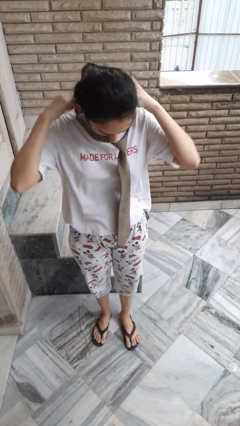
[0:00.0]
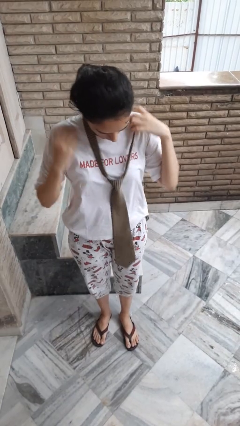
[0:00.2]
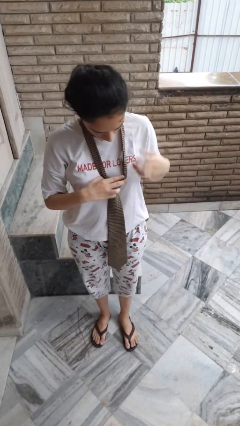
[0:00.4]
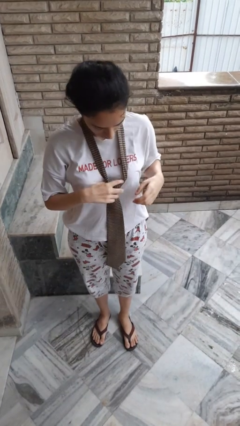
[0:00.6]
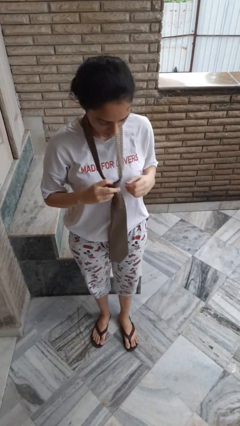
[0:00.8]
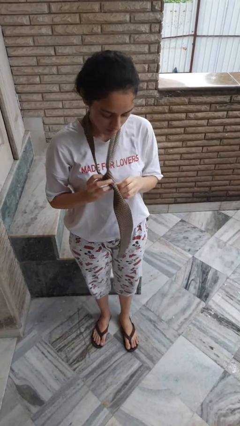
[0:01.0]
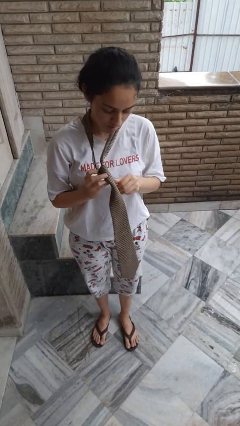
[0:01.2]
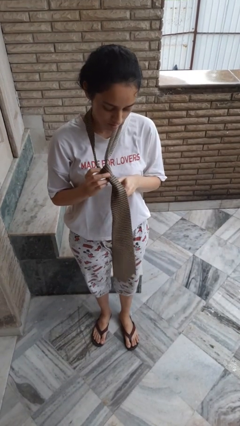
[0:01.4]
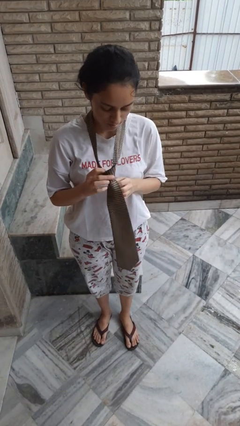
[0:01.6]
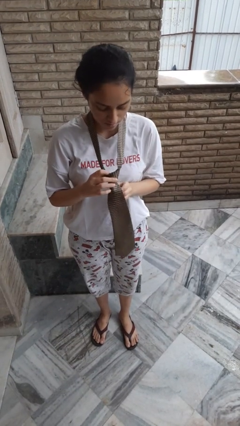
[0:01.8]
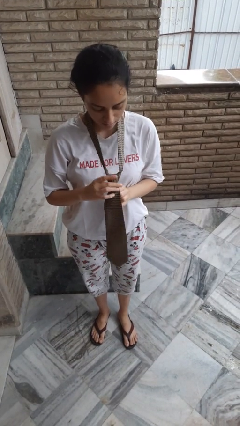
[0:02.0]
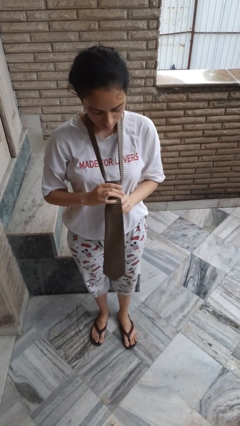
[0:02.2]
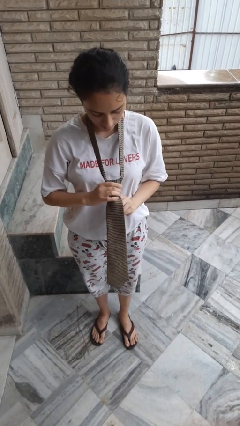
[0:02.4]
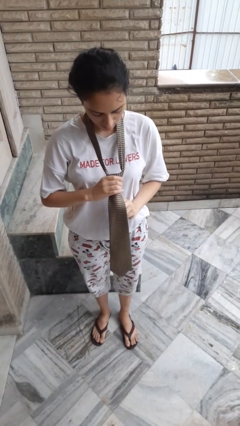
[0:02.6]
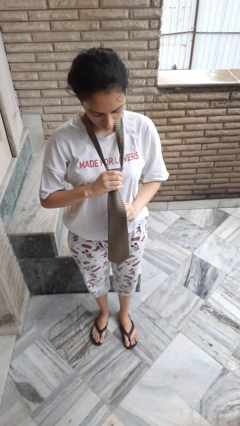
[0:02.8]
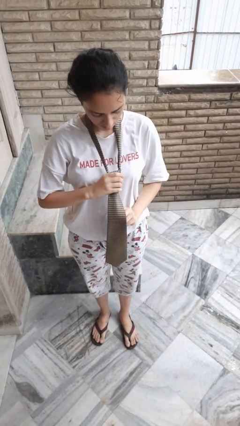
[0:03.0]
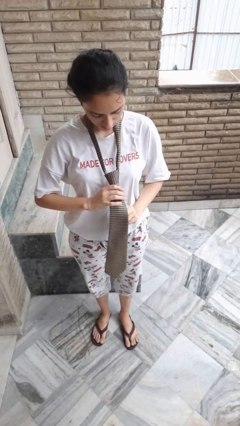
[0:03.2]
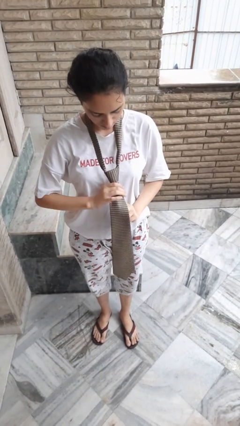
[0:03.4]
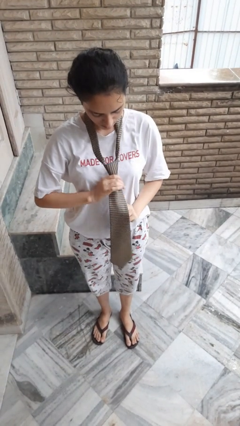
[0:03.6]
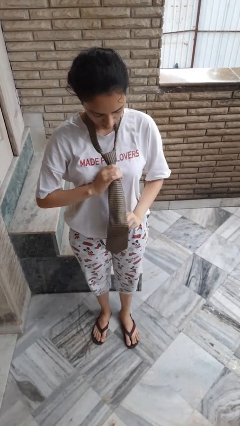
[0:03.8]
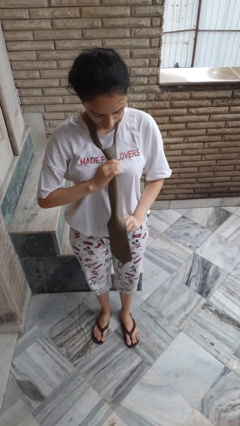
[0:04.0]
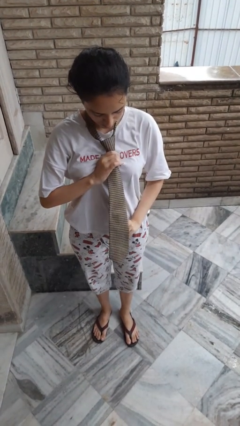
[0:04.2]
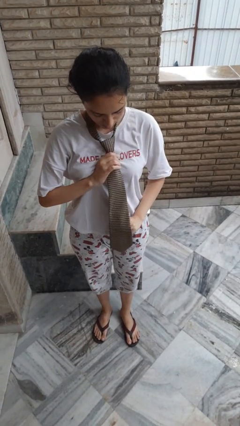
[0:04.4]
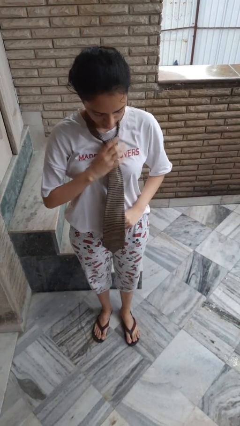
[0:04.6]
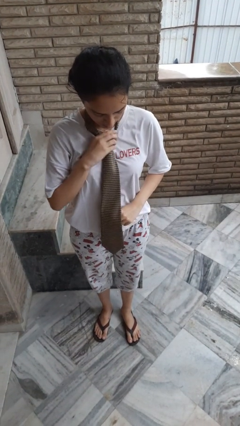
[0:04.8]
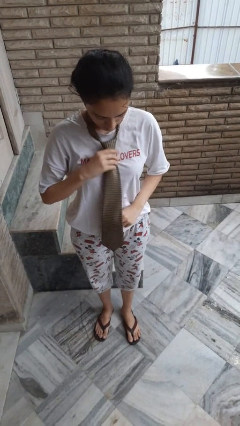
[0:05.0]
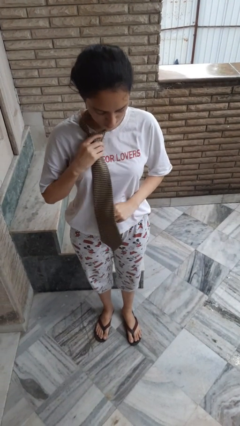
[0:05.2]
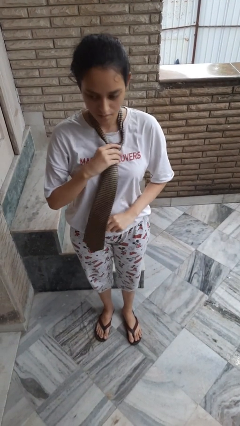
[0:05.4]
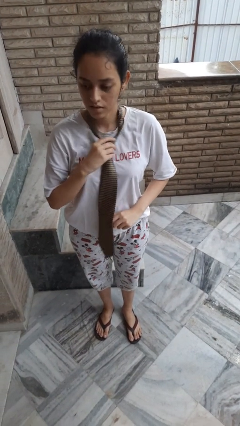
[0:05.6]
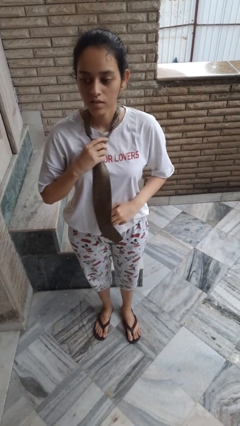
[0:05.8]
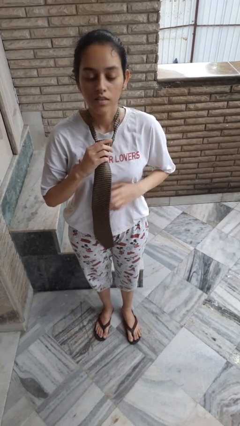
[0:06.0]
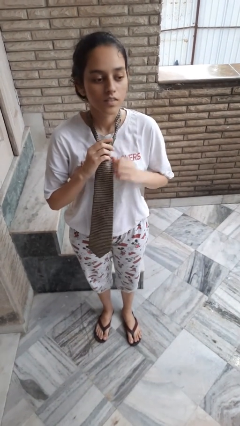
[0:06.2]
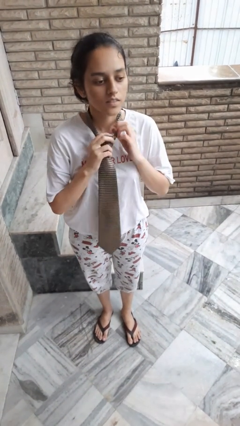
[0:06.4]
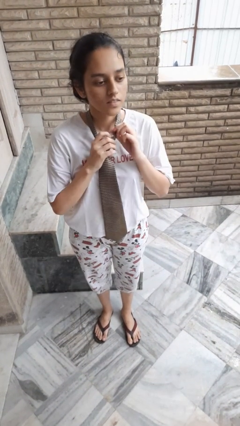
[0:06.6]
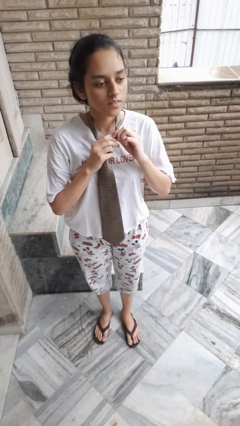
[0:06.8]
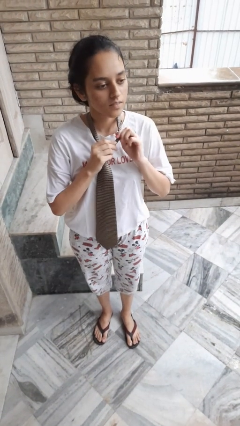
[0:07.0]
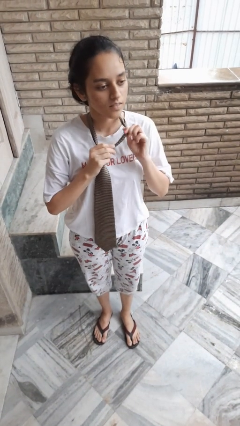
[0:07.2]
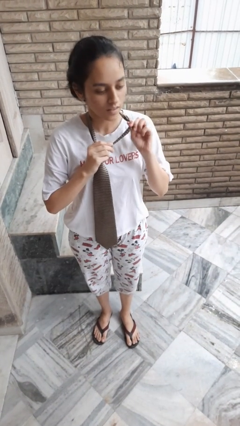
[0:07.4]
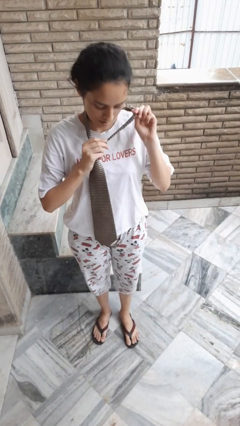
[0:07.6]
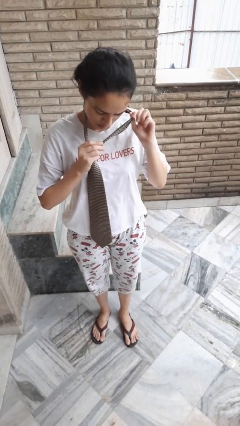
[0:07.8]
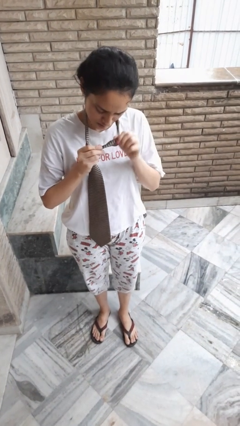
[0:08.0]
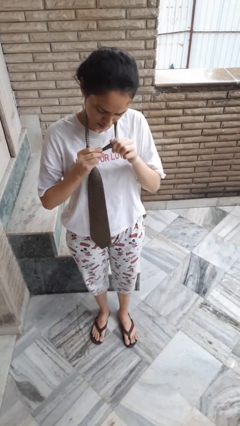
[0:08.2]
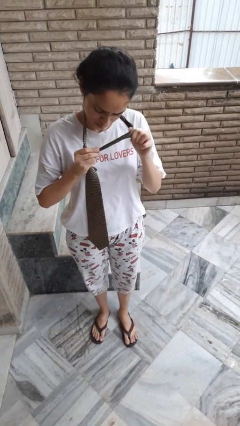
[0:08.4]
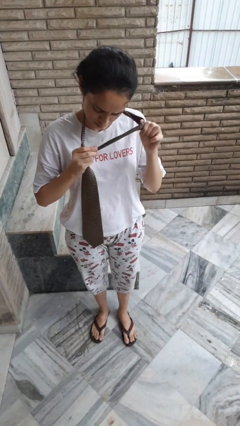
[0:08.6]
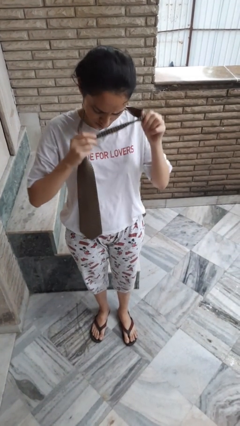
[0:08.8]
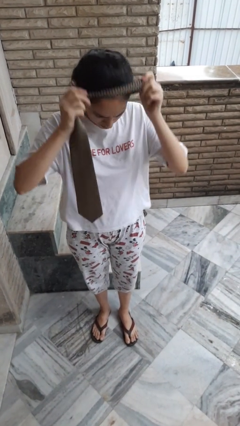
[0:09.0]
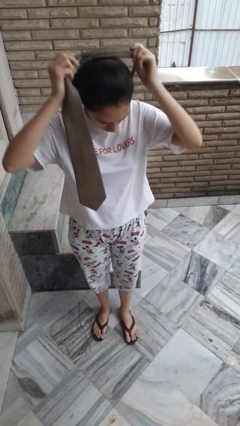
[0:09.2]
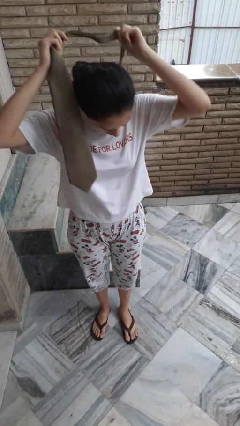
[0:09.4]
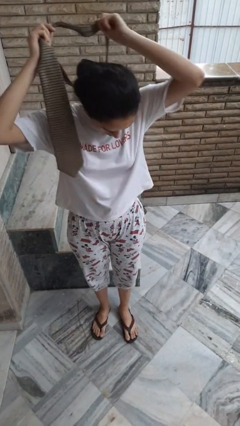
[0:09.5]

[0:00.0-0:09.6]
person puts on necktie

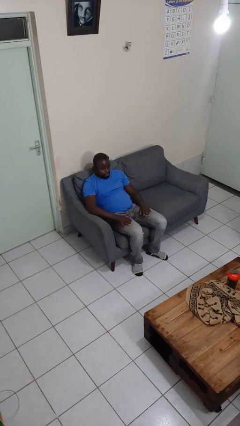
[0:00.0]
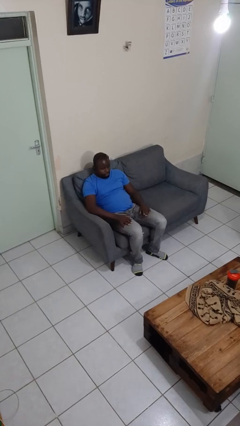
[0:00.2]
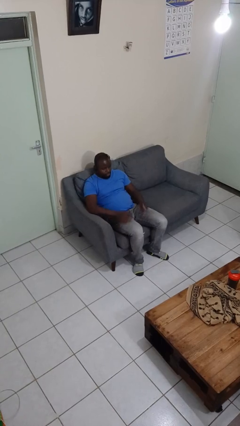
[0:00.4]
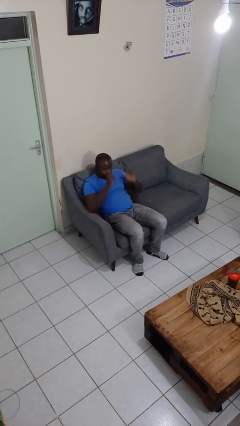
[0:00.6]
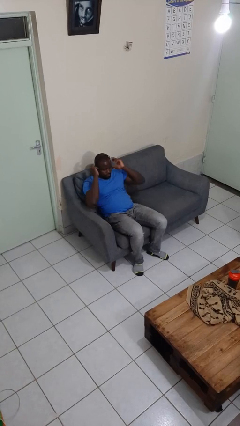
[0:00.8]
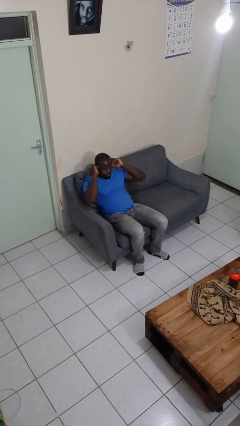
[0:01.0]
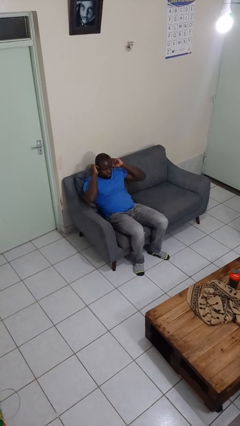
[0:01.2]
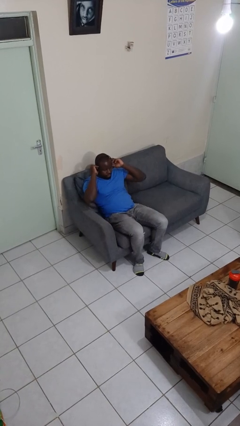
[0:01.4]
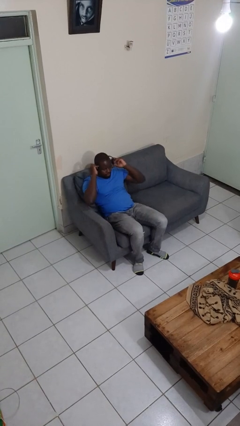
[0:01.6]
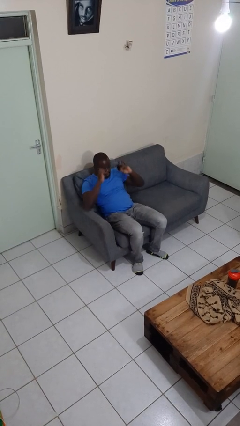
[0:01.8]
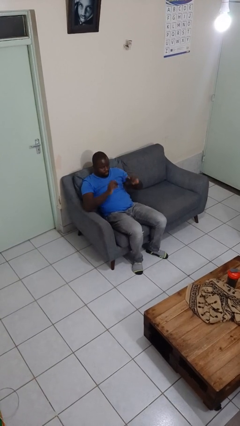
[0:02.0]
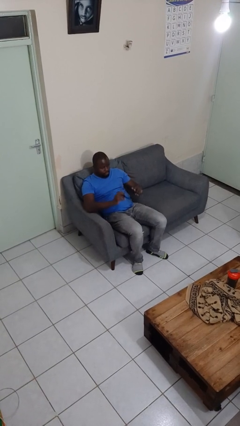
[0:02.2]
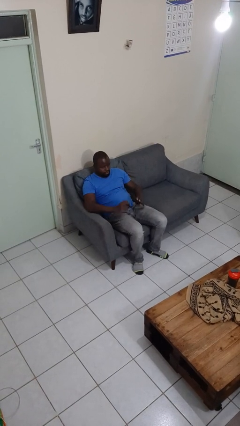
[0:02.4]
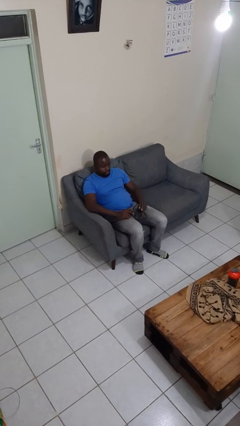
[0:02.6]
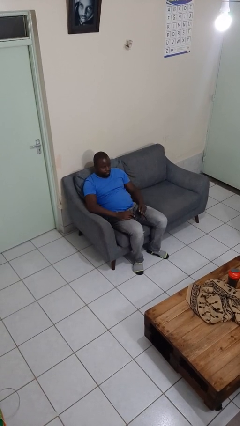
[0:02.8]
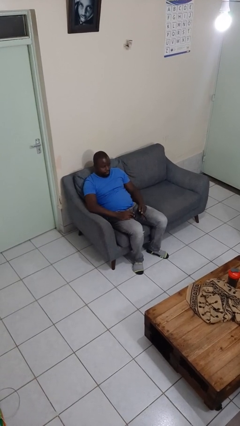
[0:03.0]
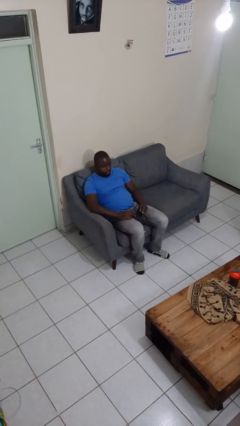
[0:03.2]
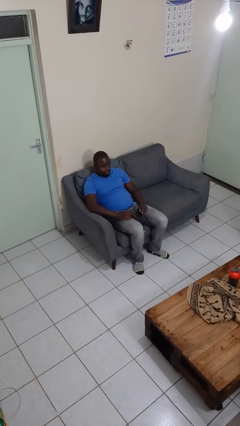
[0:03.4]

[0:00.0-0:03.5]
person takes off headphones

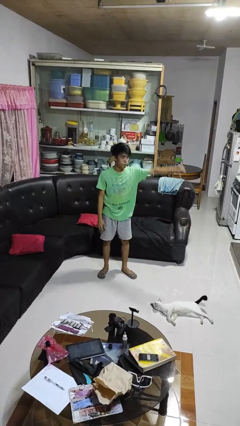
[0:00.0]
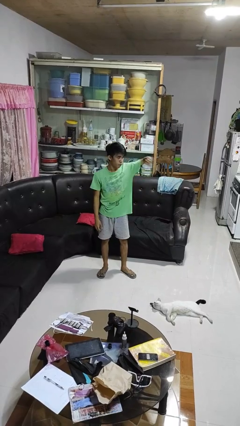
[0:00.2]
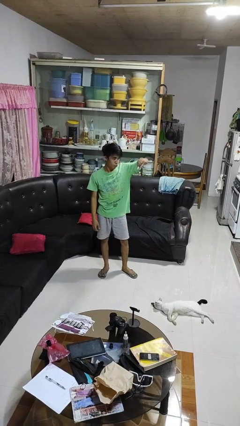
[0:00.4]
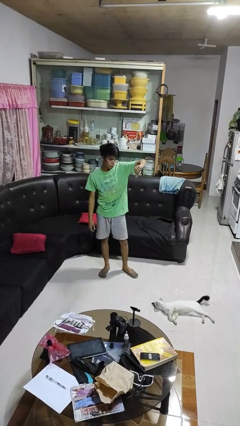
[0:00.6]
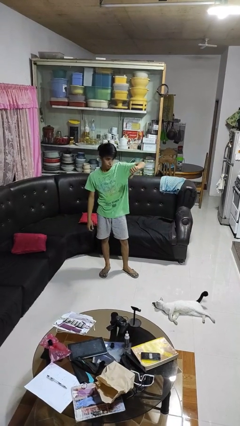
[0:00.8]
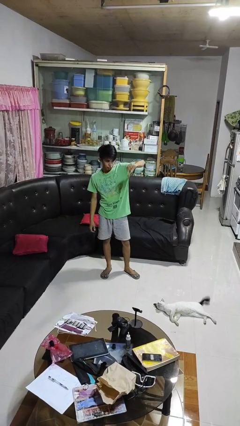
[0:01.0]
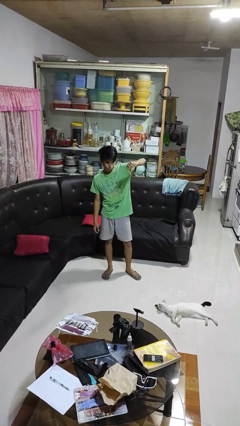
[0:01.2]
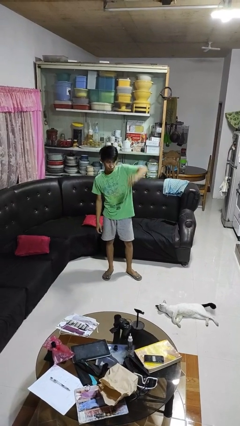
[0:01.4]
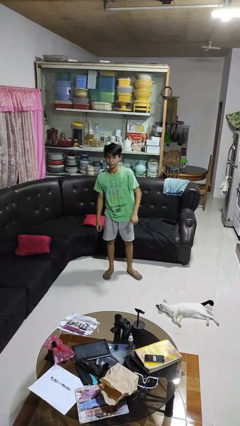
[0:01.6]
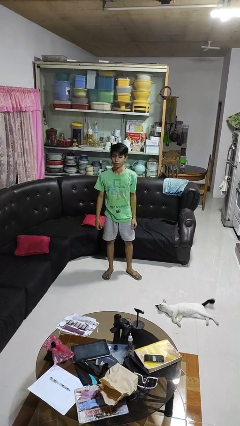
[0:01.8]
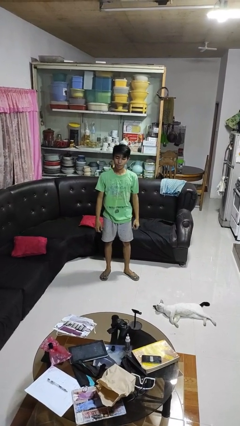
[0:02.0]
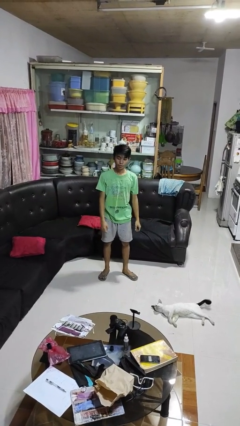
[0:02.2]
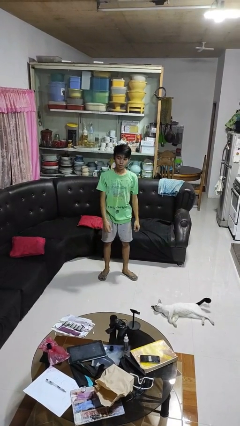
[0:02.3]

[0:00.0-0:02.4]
person gestures thumbs down

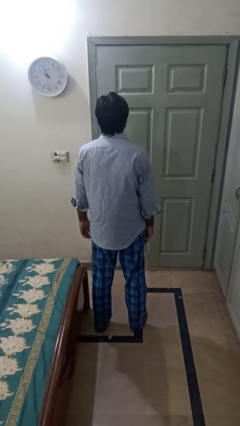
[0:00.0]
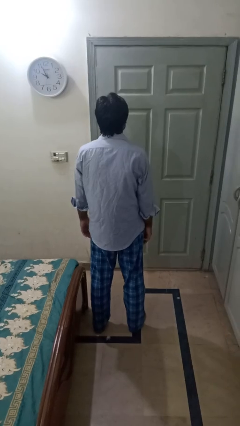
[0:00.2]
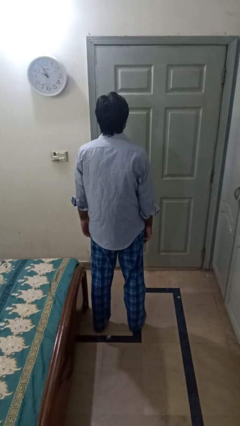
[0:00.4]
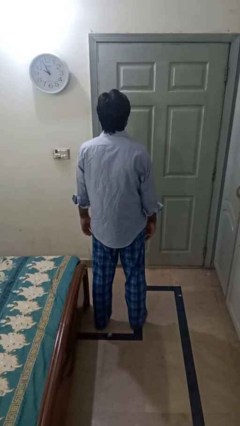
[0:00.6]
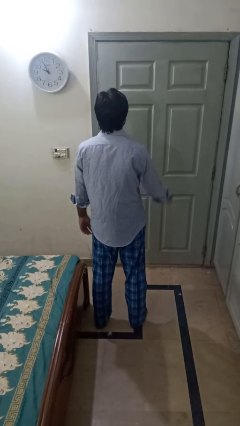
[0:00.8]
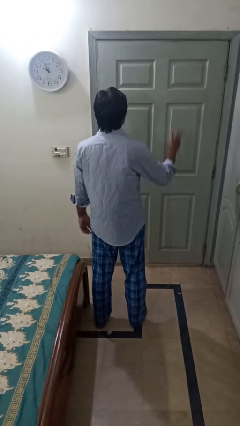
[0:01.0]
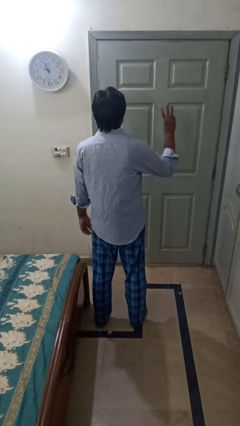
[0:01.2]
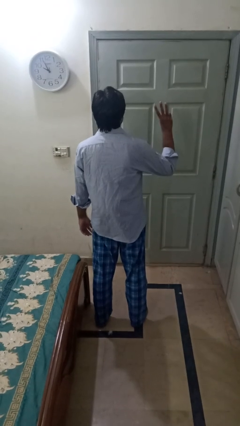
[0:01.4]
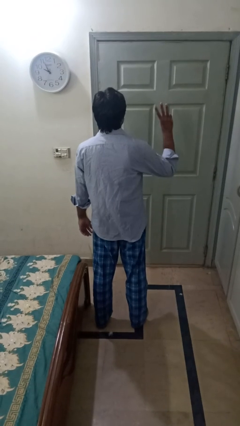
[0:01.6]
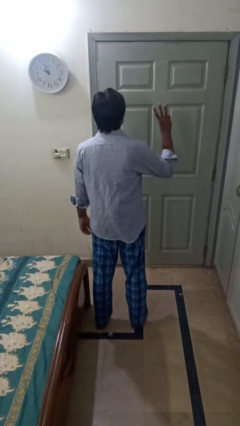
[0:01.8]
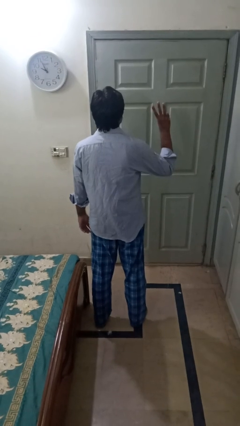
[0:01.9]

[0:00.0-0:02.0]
person gestures number three
